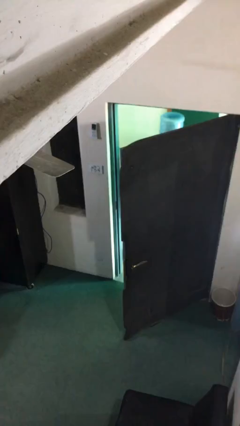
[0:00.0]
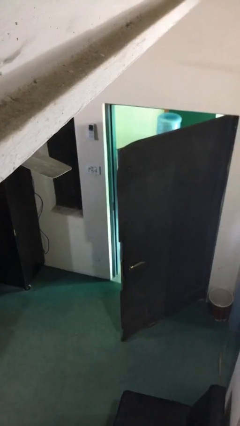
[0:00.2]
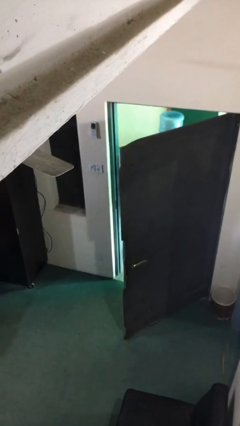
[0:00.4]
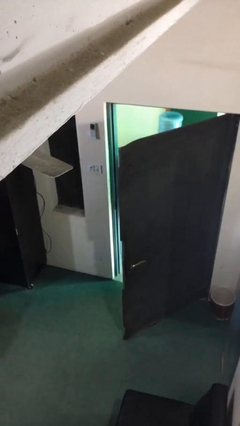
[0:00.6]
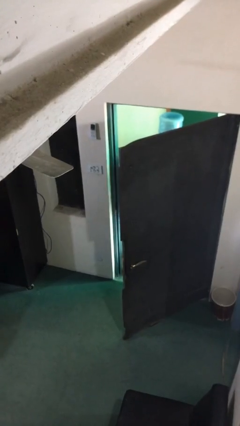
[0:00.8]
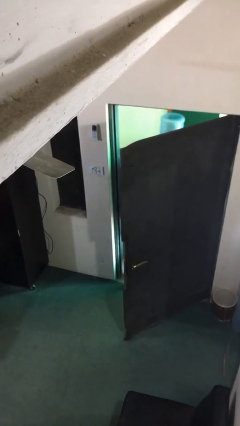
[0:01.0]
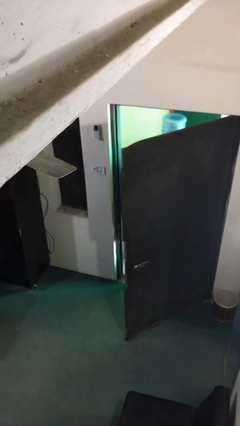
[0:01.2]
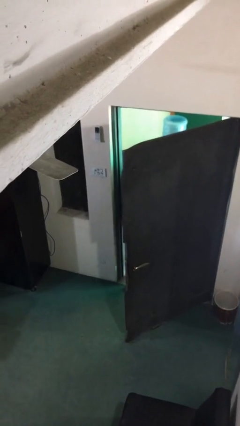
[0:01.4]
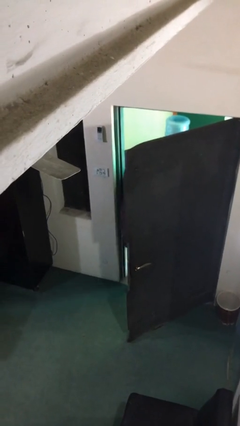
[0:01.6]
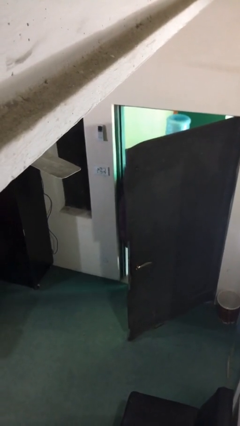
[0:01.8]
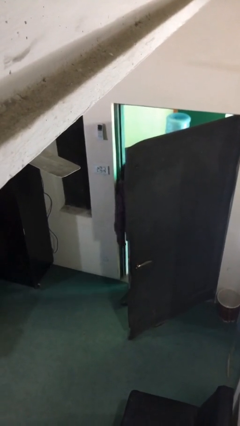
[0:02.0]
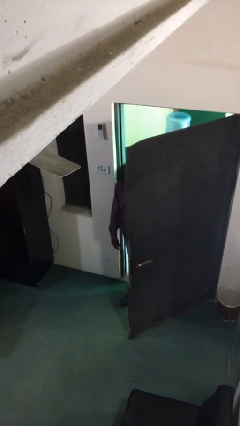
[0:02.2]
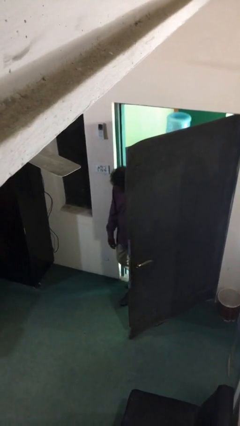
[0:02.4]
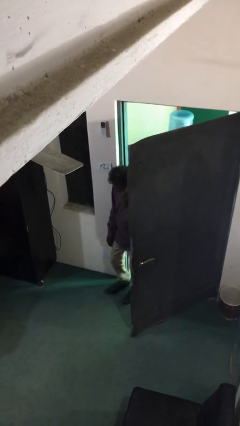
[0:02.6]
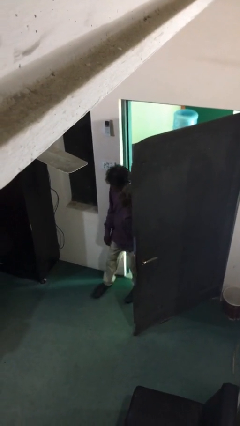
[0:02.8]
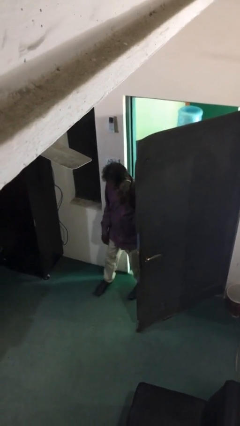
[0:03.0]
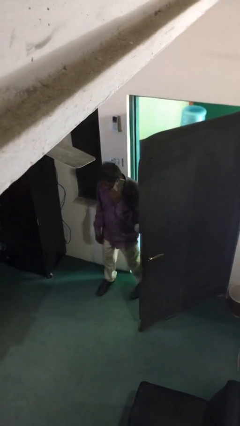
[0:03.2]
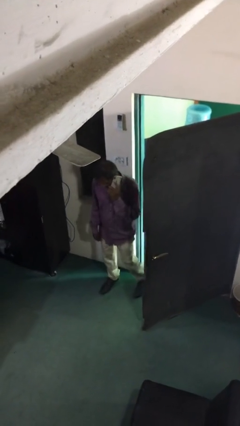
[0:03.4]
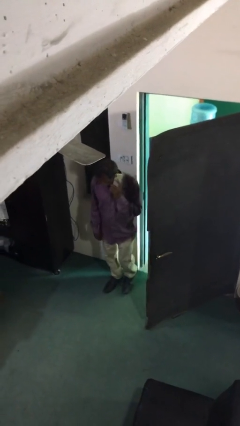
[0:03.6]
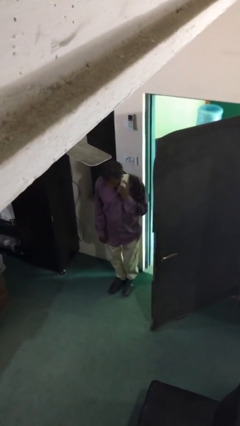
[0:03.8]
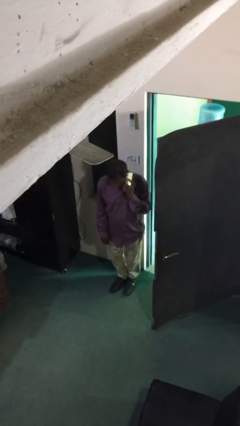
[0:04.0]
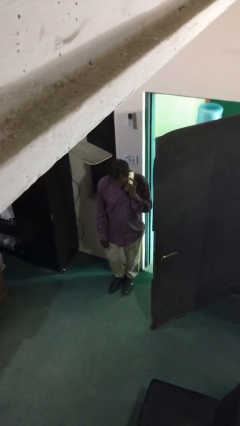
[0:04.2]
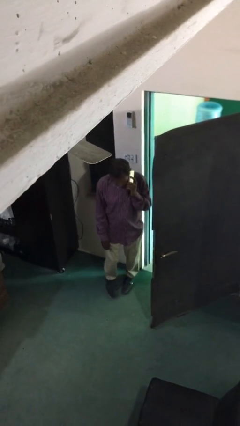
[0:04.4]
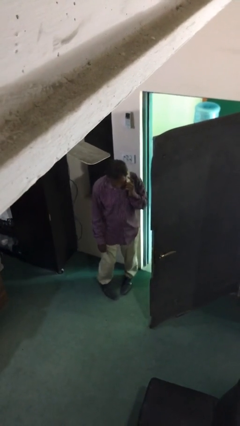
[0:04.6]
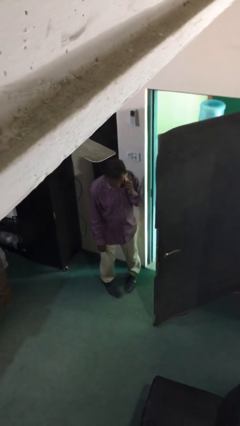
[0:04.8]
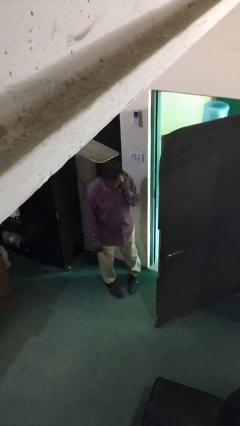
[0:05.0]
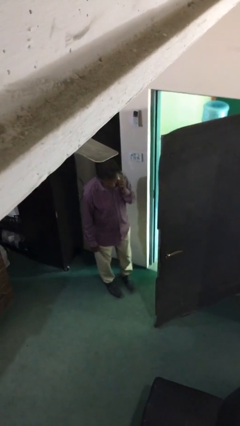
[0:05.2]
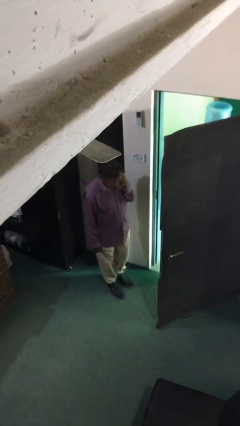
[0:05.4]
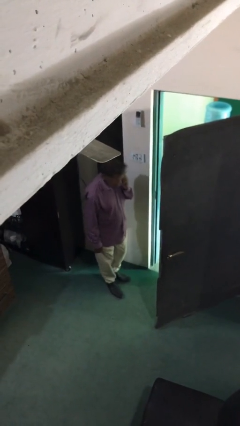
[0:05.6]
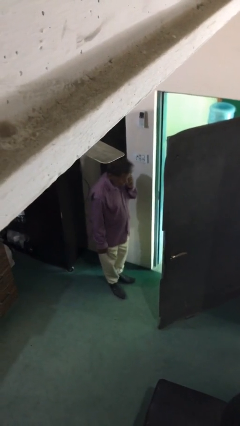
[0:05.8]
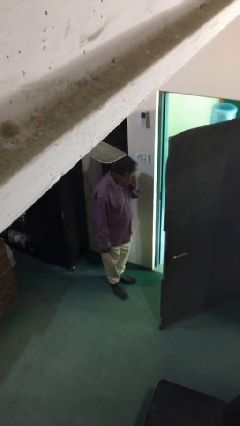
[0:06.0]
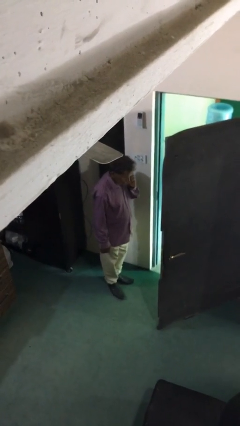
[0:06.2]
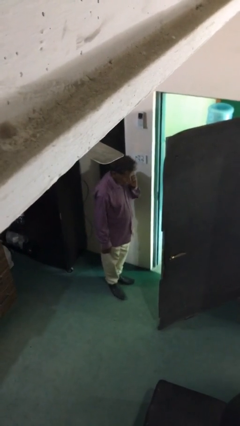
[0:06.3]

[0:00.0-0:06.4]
person enters scene through structure

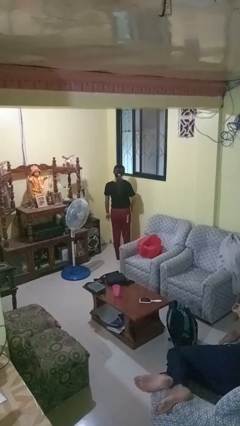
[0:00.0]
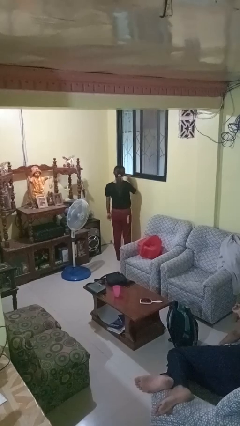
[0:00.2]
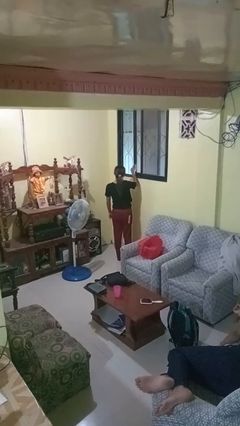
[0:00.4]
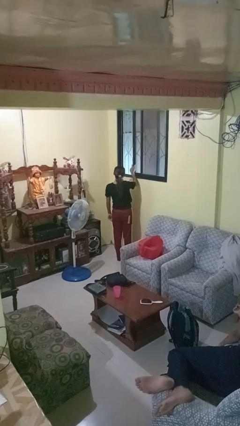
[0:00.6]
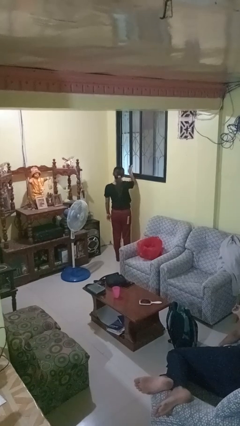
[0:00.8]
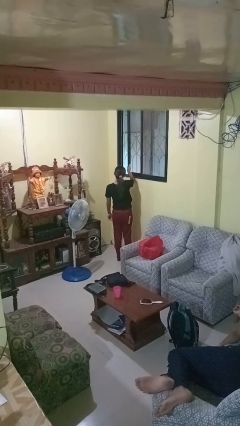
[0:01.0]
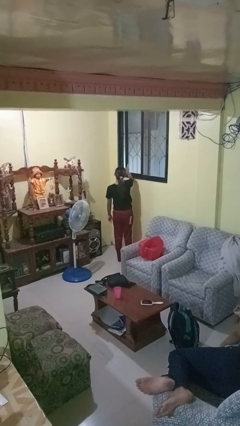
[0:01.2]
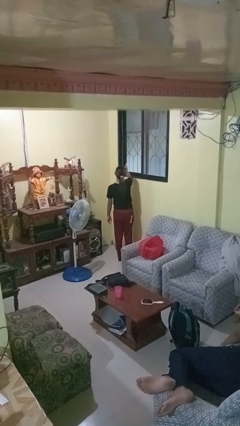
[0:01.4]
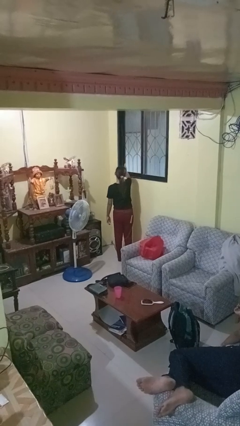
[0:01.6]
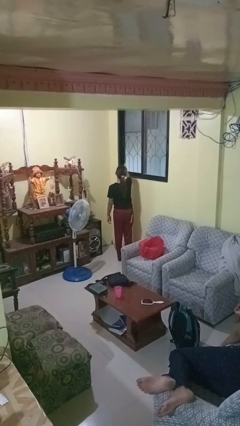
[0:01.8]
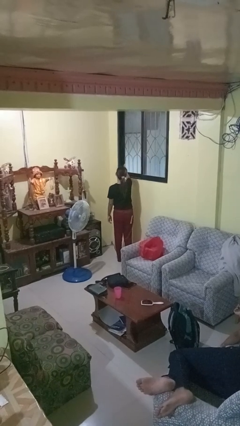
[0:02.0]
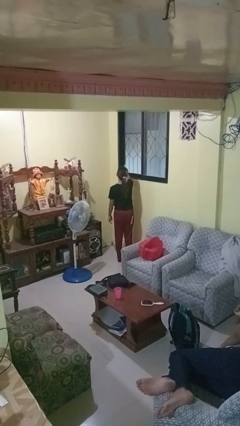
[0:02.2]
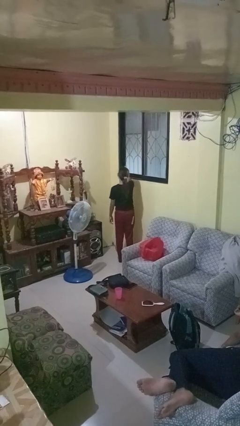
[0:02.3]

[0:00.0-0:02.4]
person closes home window

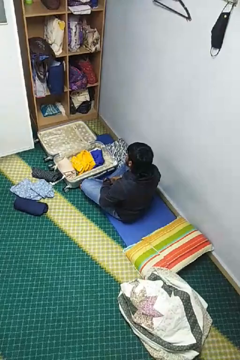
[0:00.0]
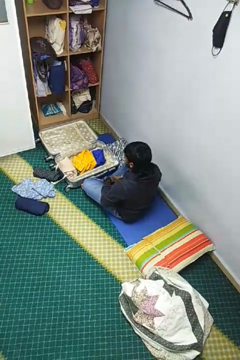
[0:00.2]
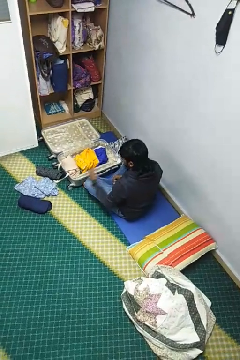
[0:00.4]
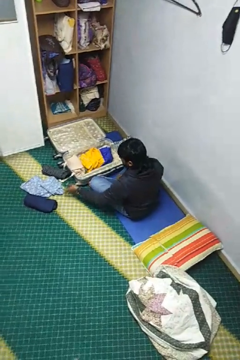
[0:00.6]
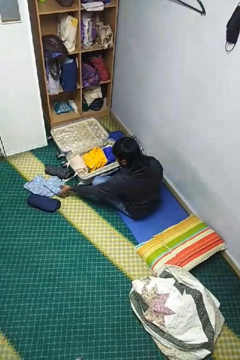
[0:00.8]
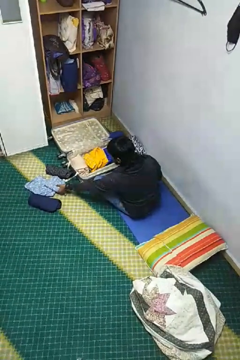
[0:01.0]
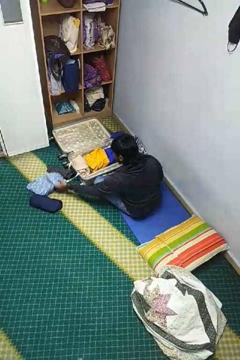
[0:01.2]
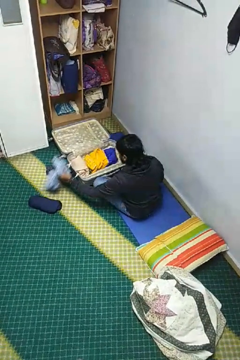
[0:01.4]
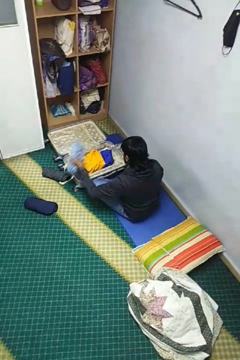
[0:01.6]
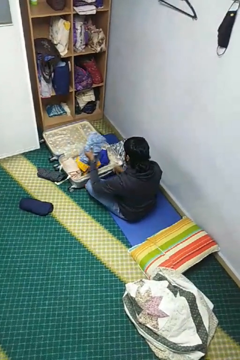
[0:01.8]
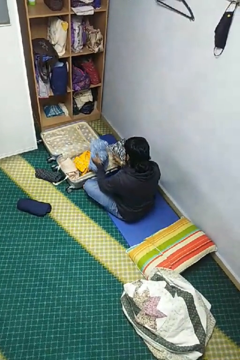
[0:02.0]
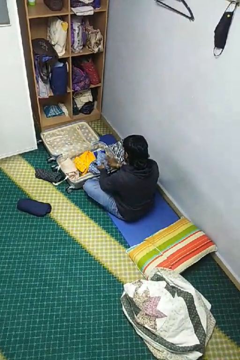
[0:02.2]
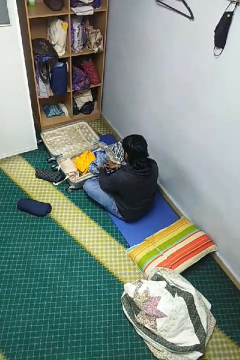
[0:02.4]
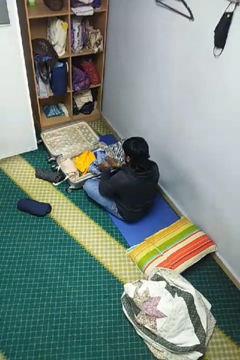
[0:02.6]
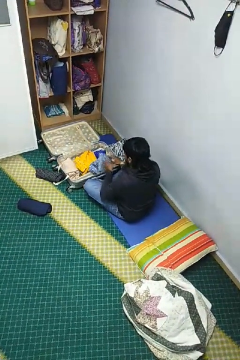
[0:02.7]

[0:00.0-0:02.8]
person loads clothes into suitcase

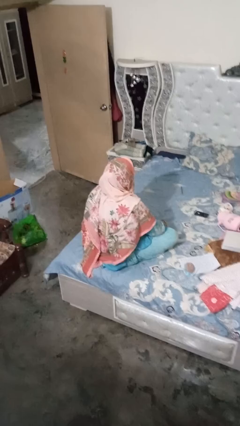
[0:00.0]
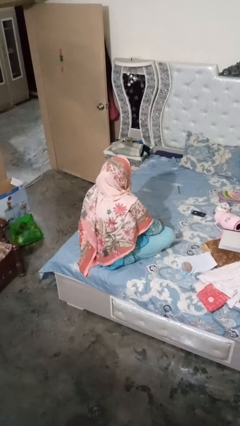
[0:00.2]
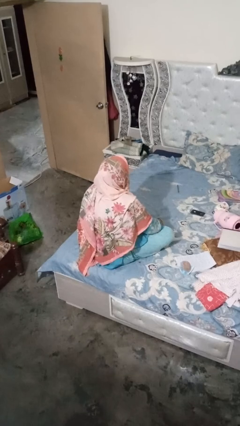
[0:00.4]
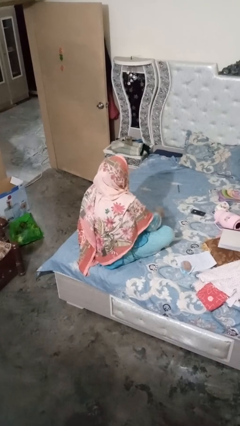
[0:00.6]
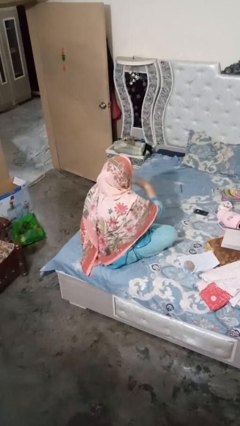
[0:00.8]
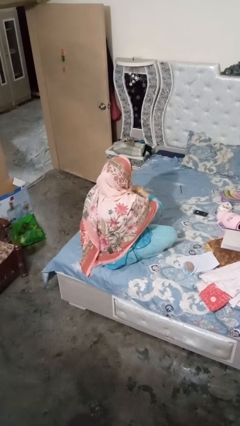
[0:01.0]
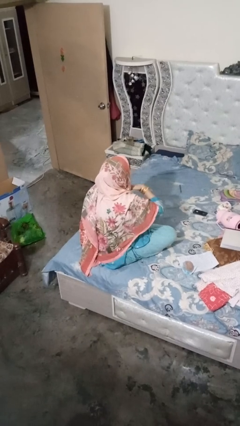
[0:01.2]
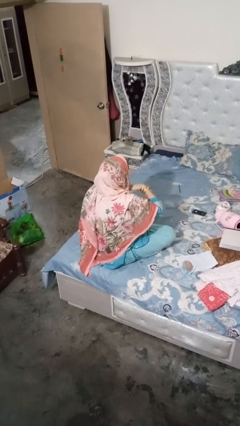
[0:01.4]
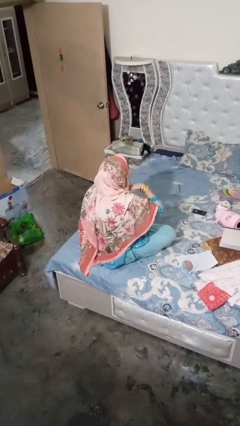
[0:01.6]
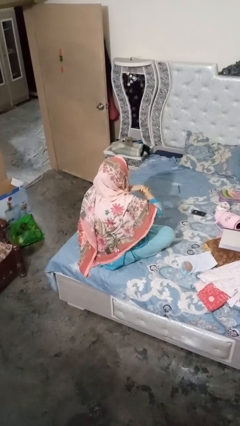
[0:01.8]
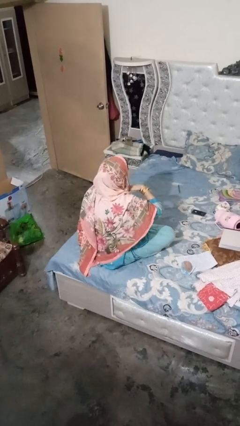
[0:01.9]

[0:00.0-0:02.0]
person gestures cut

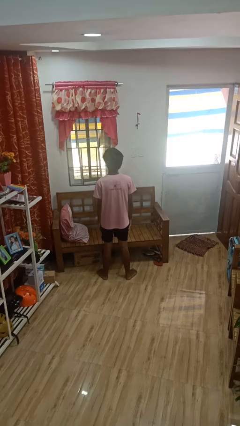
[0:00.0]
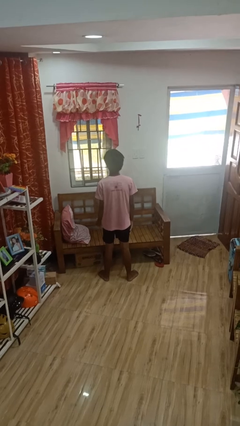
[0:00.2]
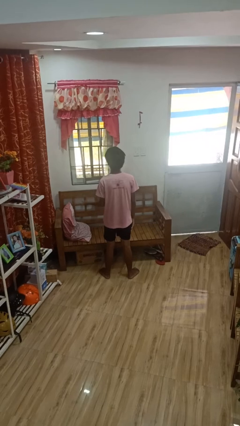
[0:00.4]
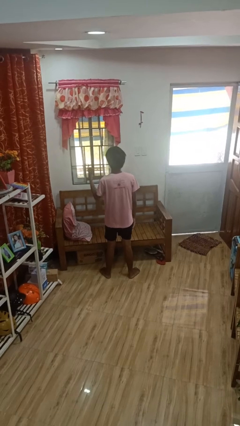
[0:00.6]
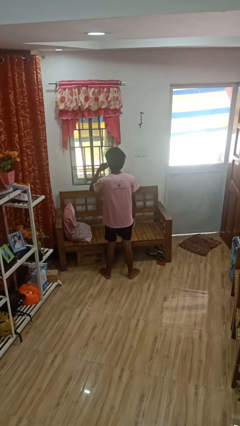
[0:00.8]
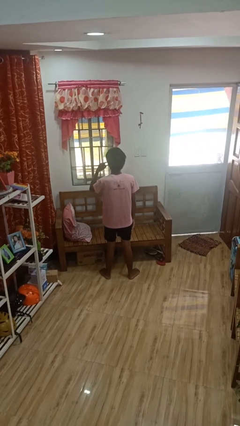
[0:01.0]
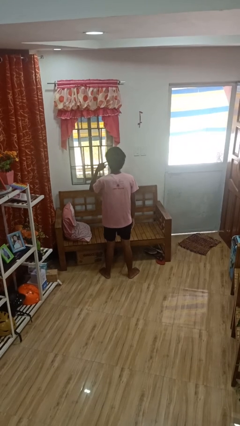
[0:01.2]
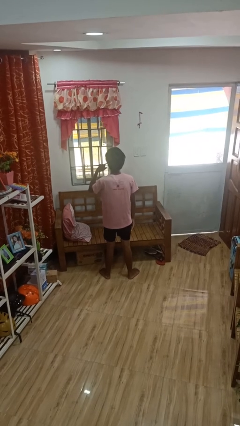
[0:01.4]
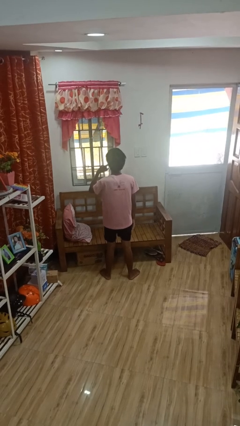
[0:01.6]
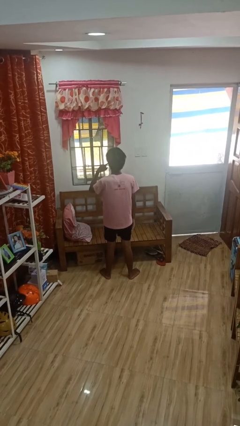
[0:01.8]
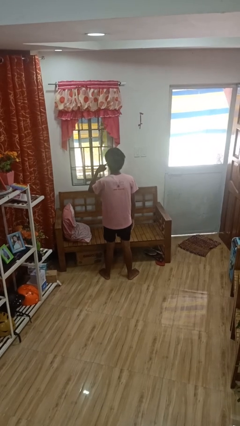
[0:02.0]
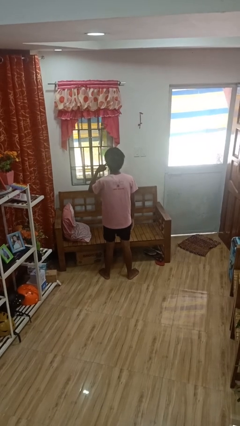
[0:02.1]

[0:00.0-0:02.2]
person gestures listen closely

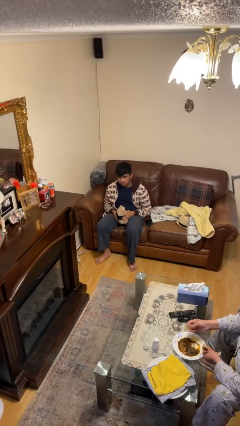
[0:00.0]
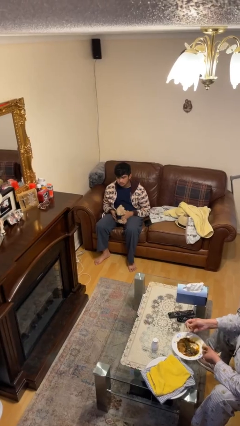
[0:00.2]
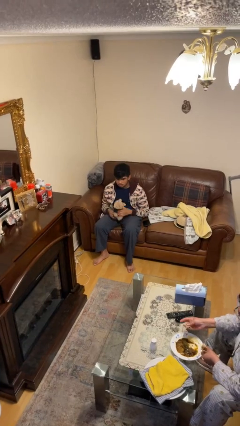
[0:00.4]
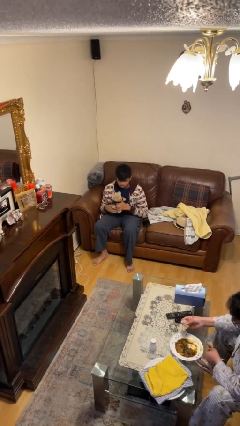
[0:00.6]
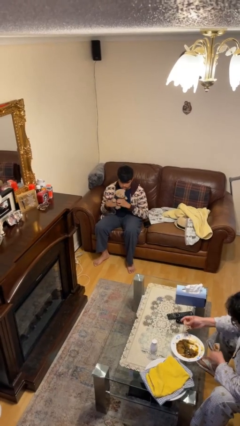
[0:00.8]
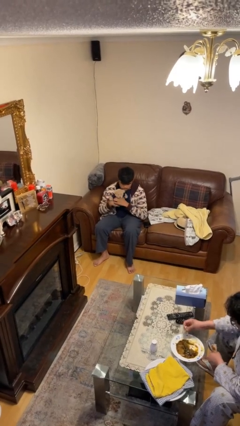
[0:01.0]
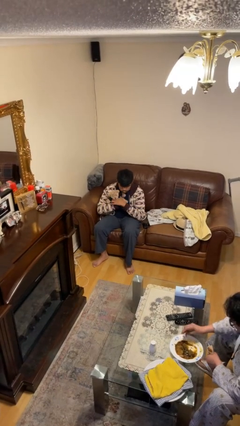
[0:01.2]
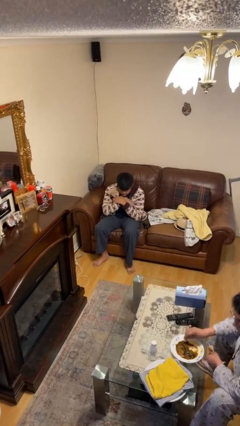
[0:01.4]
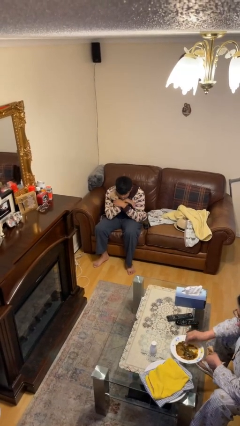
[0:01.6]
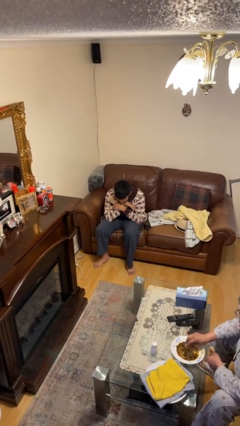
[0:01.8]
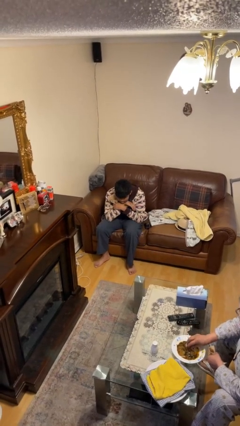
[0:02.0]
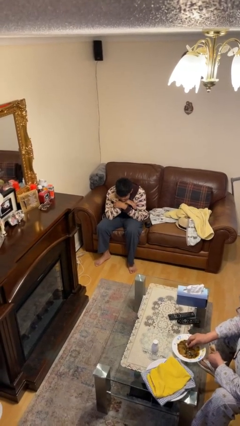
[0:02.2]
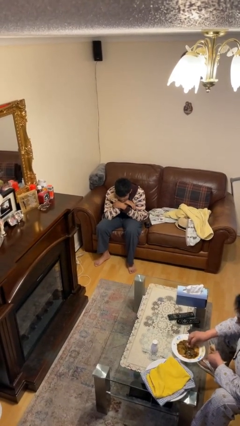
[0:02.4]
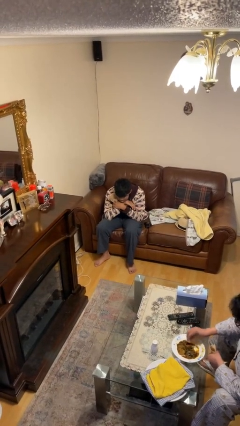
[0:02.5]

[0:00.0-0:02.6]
person hugs stuffed animal
